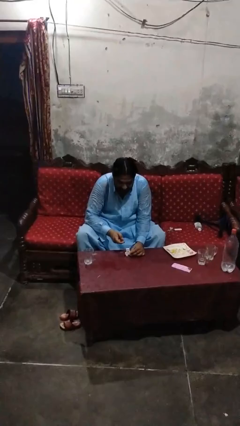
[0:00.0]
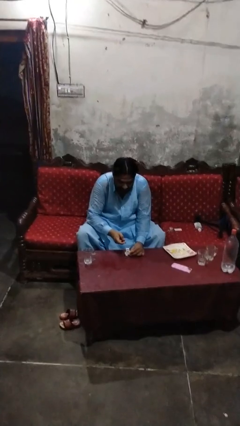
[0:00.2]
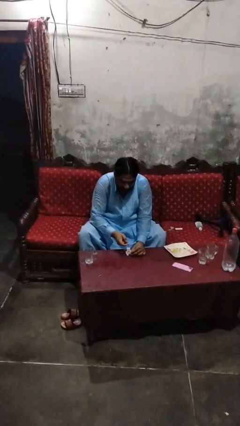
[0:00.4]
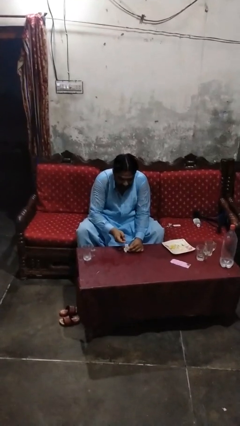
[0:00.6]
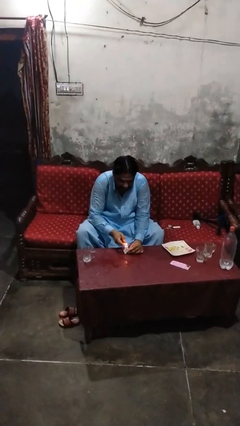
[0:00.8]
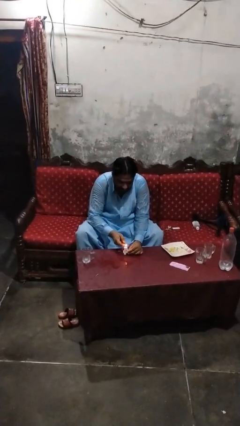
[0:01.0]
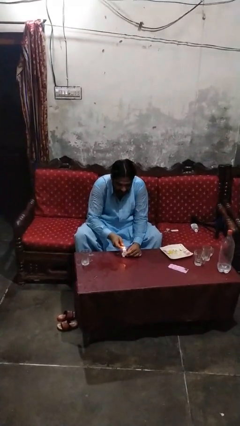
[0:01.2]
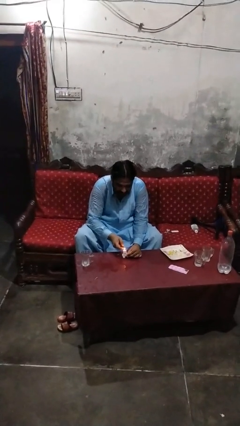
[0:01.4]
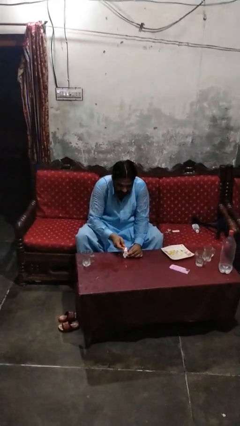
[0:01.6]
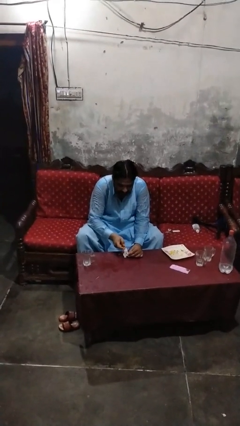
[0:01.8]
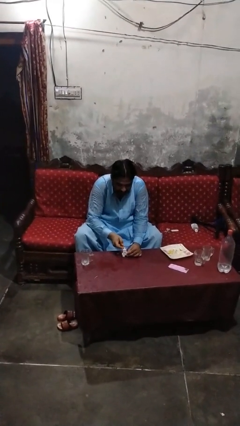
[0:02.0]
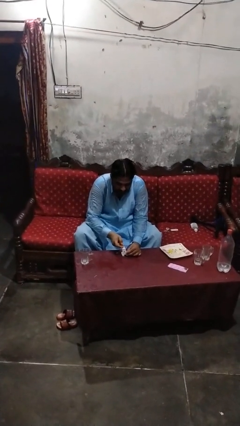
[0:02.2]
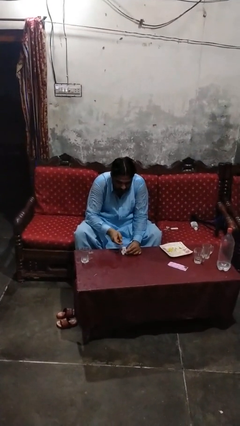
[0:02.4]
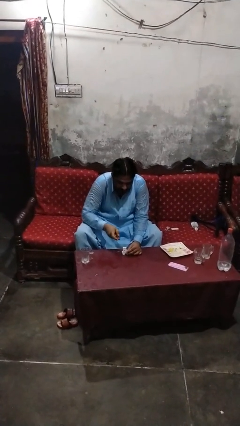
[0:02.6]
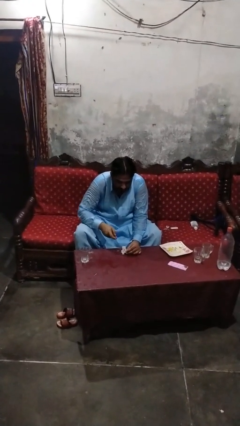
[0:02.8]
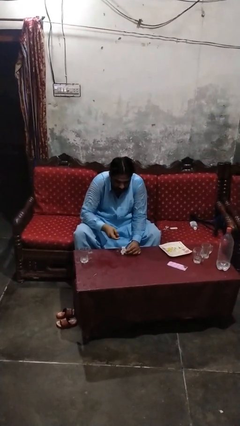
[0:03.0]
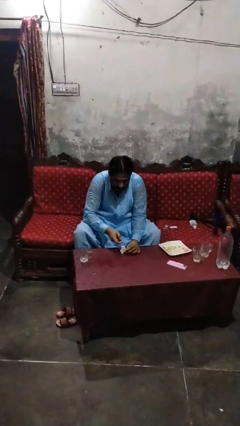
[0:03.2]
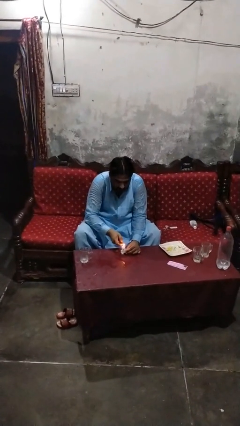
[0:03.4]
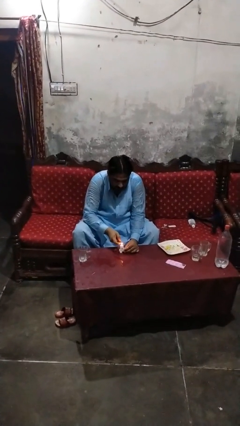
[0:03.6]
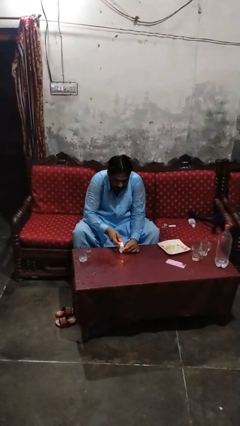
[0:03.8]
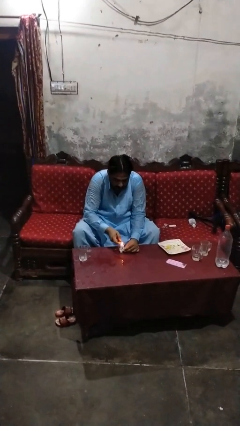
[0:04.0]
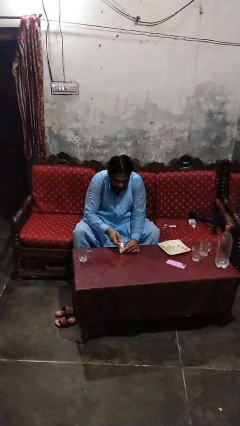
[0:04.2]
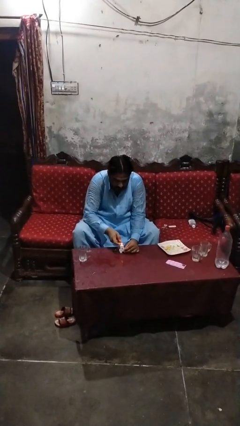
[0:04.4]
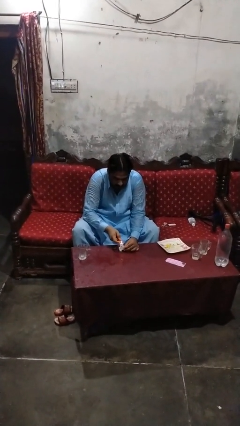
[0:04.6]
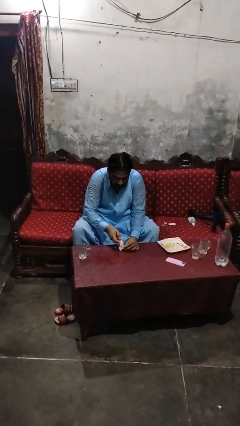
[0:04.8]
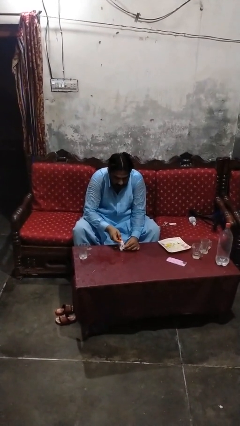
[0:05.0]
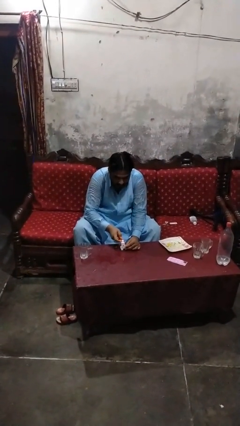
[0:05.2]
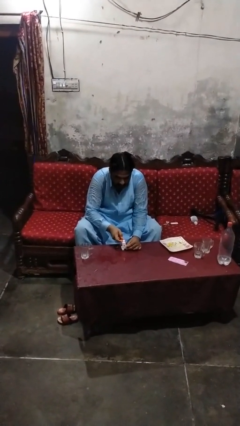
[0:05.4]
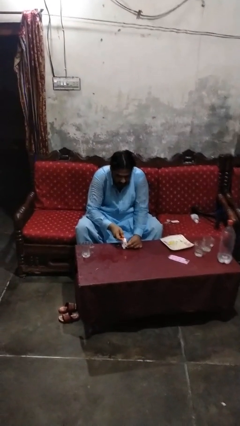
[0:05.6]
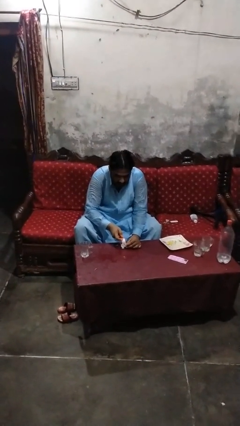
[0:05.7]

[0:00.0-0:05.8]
person lights candle

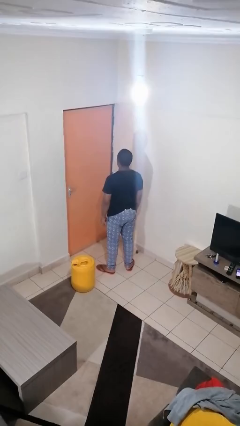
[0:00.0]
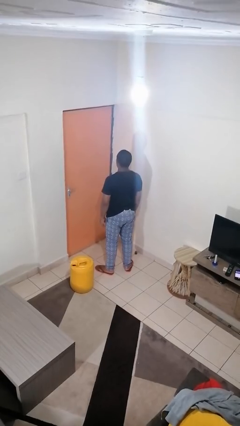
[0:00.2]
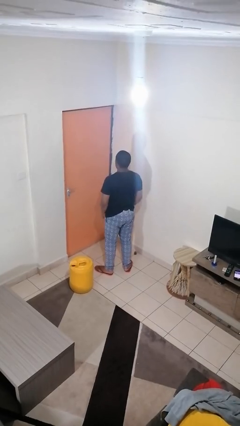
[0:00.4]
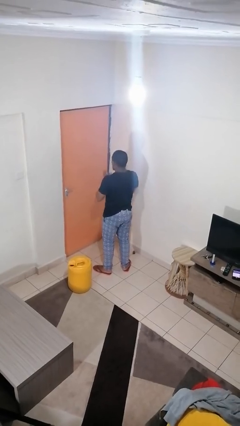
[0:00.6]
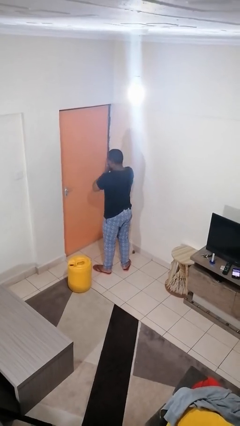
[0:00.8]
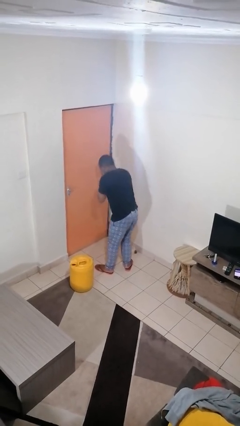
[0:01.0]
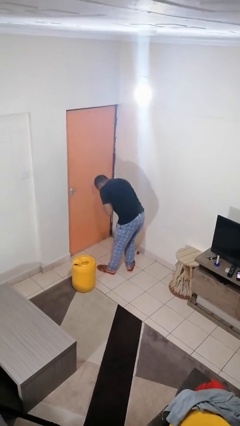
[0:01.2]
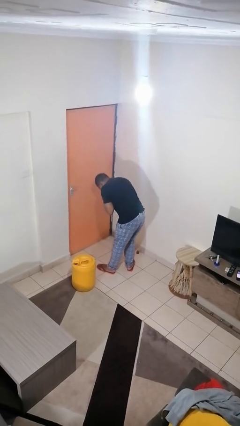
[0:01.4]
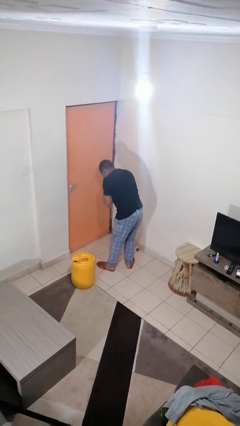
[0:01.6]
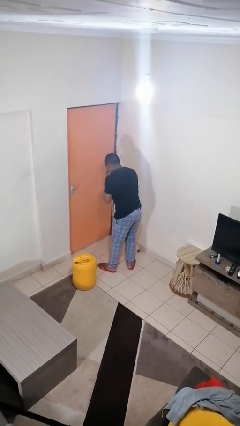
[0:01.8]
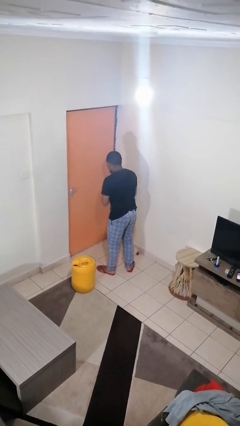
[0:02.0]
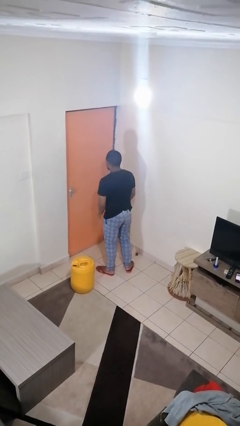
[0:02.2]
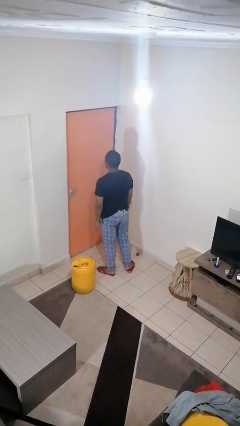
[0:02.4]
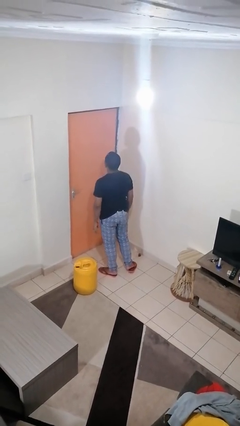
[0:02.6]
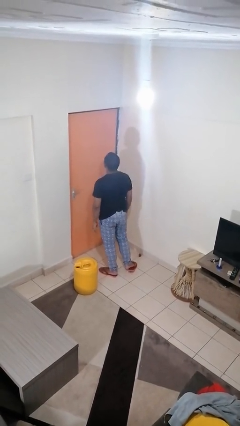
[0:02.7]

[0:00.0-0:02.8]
person sneezes into hand

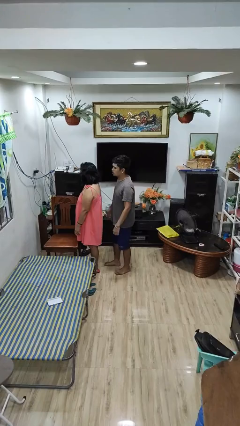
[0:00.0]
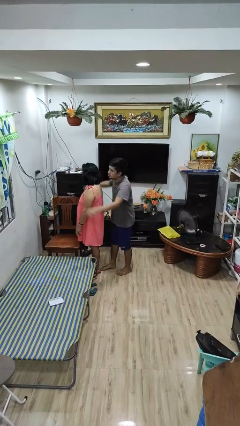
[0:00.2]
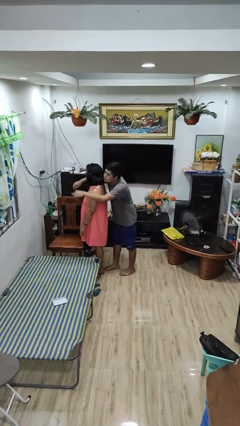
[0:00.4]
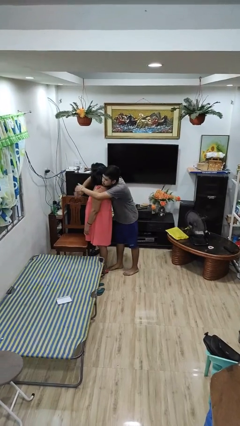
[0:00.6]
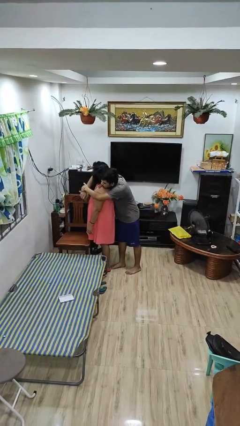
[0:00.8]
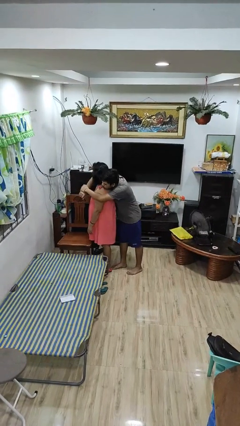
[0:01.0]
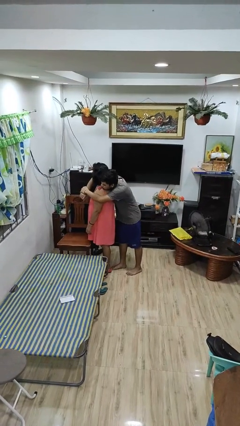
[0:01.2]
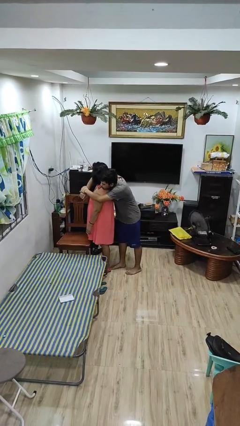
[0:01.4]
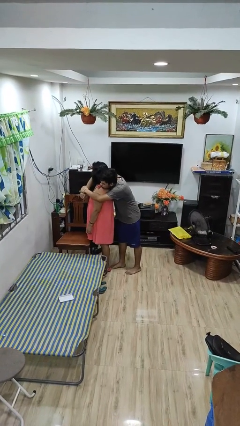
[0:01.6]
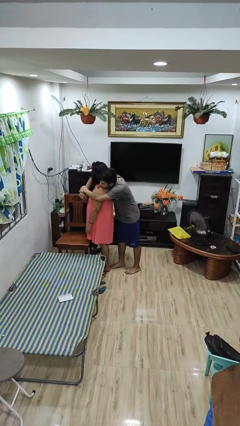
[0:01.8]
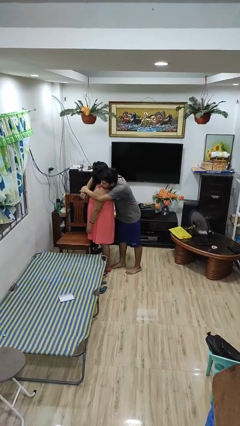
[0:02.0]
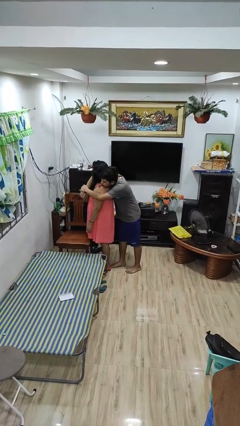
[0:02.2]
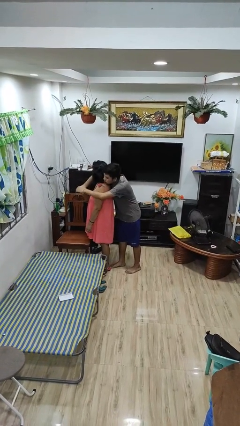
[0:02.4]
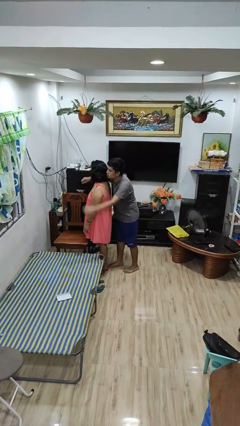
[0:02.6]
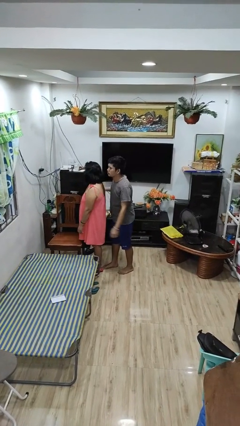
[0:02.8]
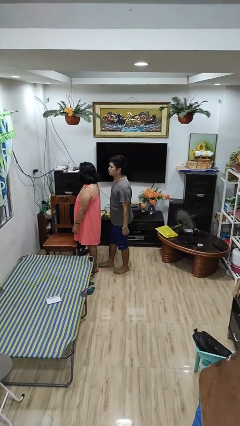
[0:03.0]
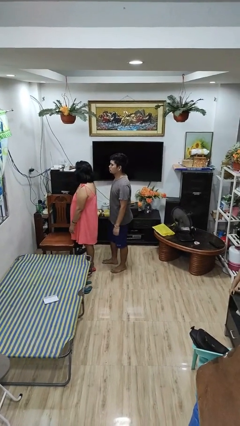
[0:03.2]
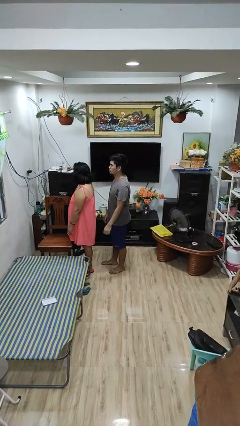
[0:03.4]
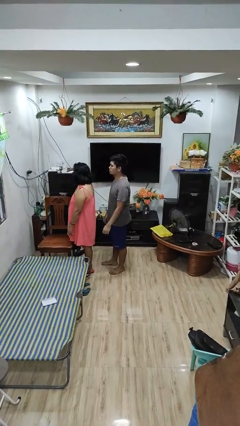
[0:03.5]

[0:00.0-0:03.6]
person hugs person from behind

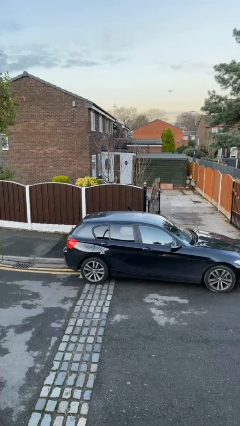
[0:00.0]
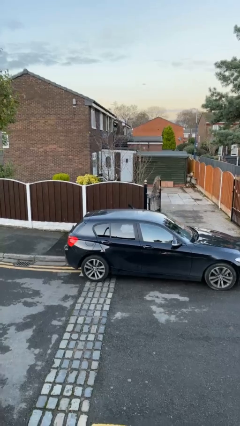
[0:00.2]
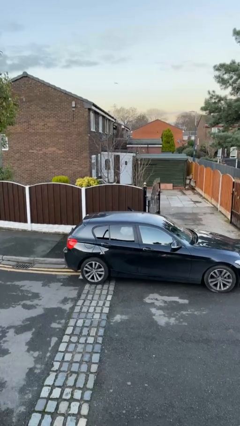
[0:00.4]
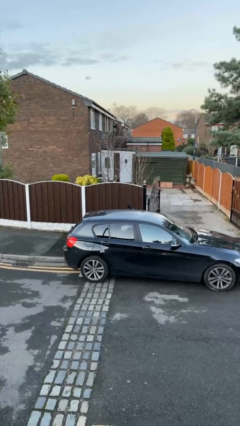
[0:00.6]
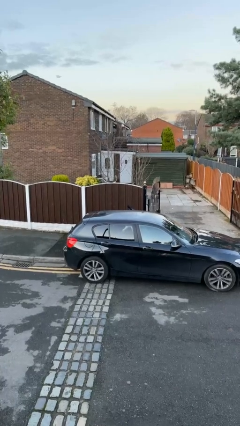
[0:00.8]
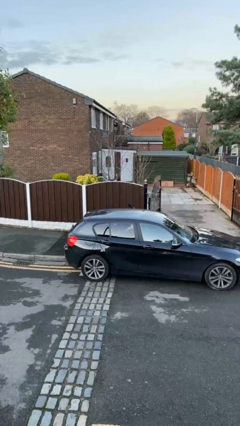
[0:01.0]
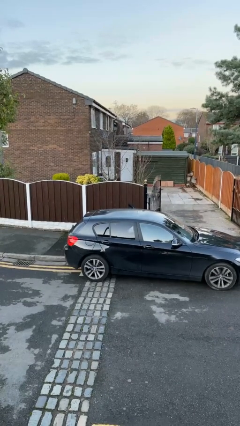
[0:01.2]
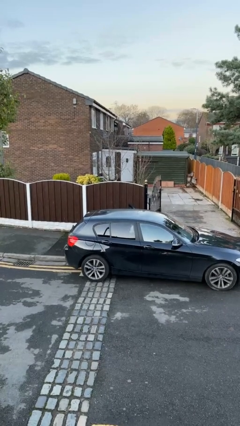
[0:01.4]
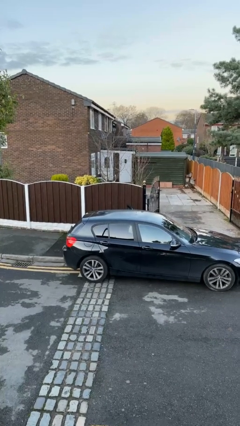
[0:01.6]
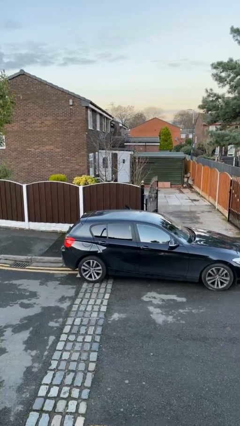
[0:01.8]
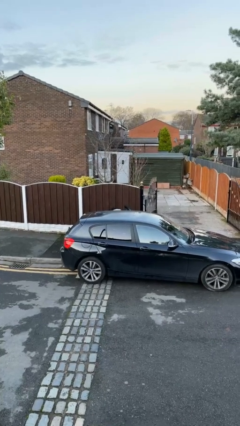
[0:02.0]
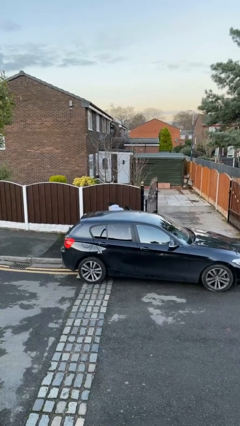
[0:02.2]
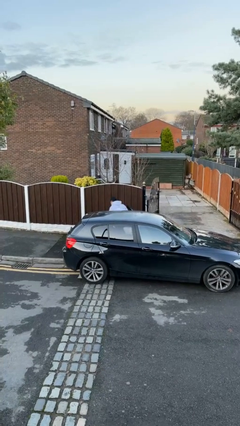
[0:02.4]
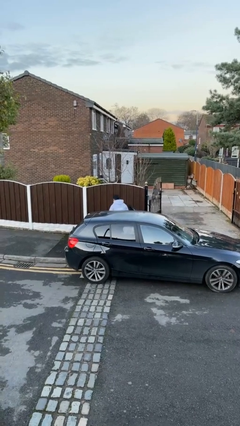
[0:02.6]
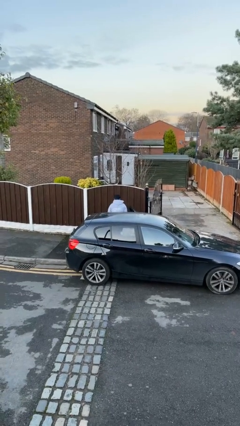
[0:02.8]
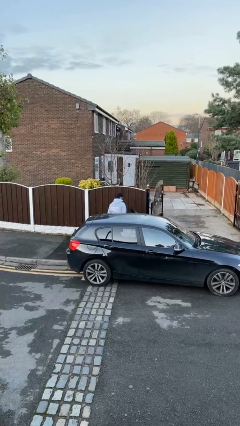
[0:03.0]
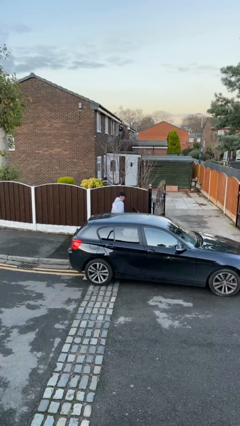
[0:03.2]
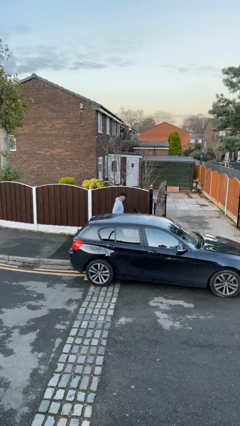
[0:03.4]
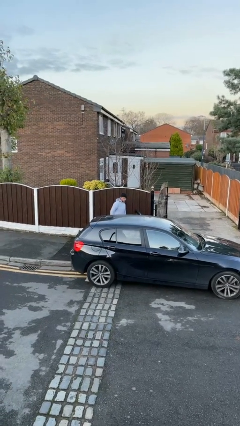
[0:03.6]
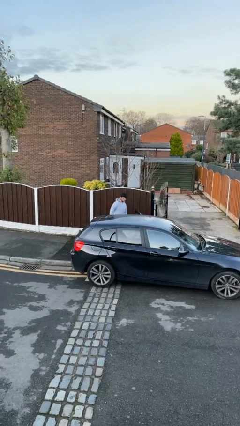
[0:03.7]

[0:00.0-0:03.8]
person exits car

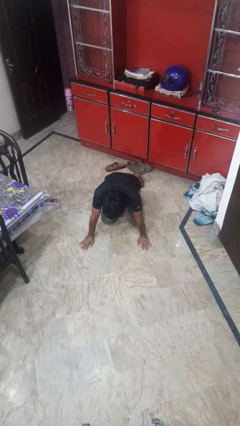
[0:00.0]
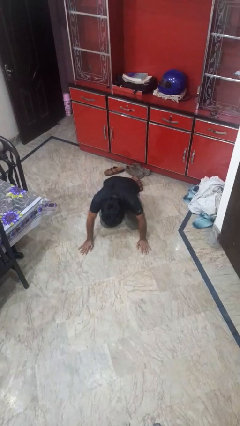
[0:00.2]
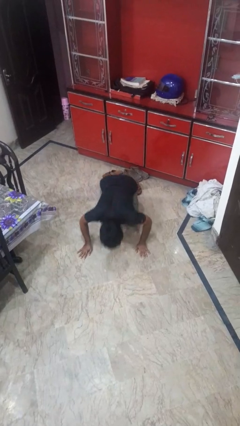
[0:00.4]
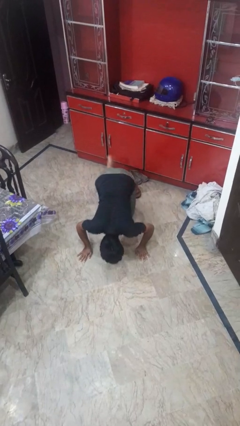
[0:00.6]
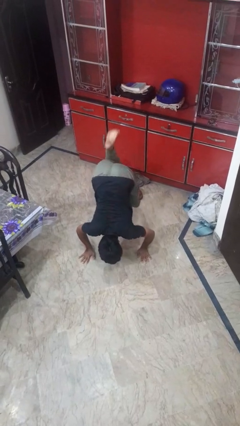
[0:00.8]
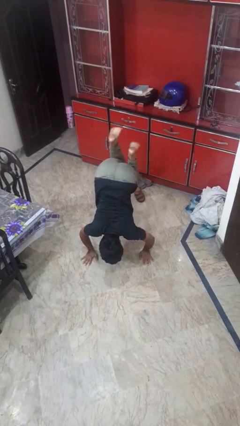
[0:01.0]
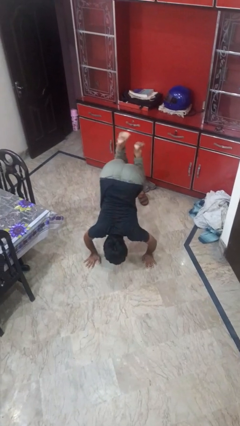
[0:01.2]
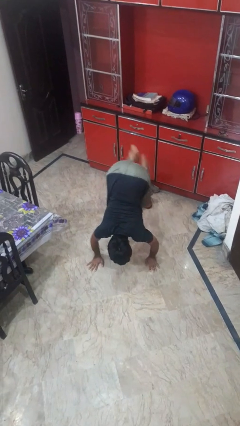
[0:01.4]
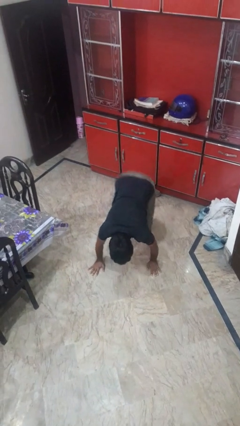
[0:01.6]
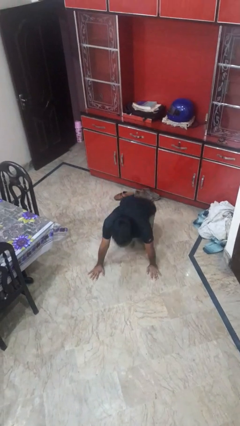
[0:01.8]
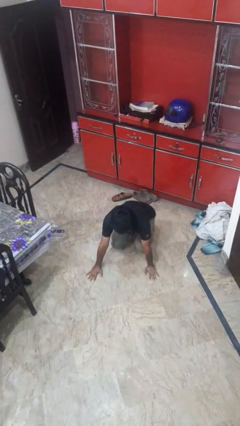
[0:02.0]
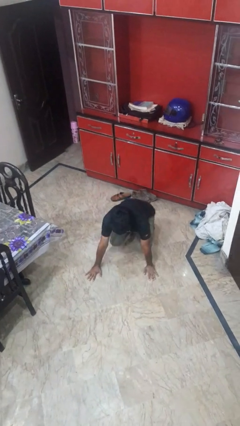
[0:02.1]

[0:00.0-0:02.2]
person handstand
